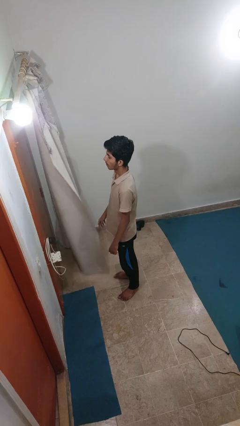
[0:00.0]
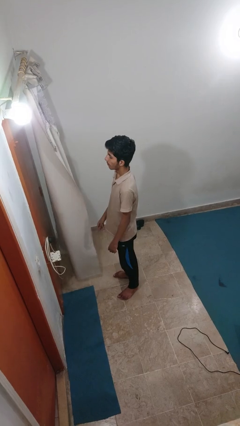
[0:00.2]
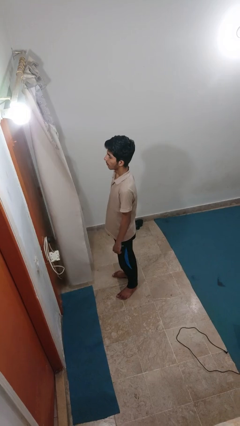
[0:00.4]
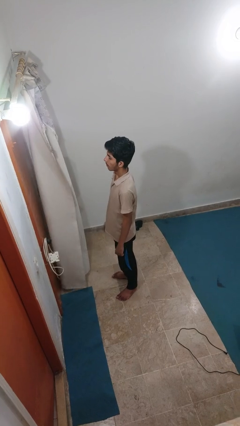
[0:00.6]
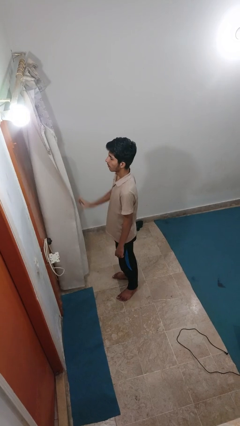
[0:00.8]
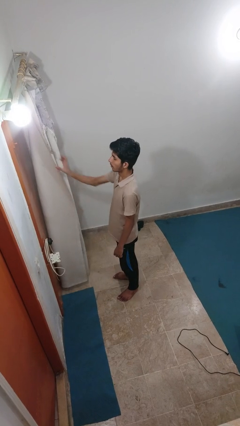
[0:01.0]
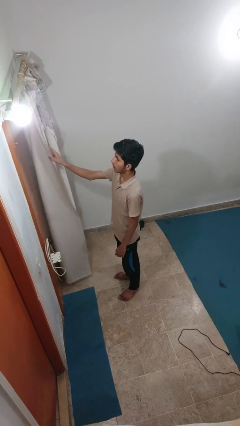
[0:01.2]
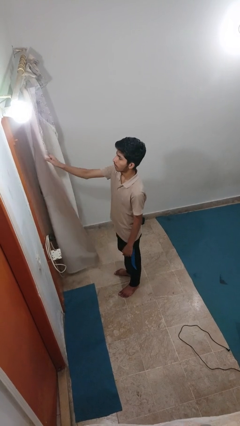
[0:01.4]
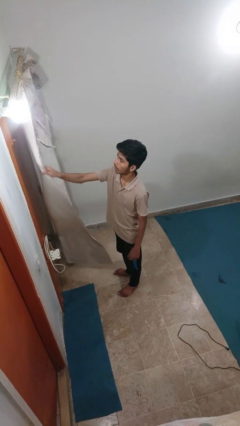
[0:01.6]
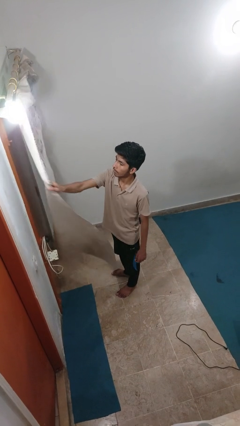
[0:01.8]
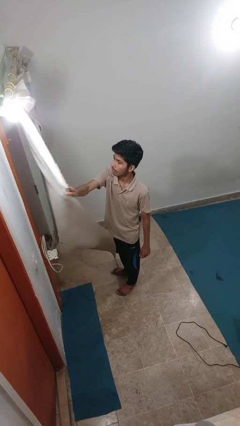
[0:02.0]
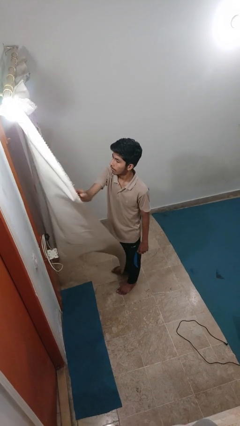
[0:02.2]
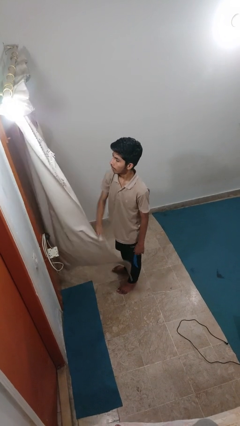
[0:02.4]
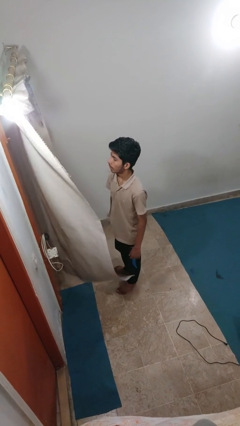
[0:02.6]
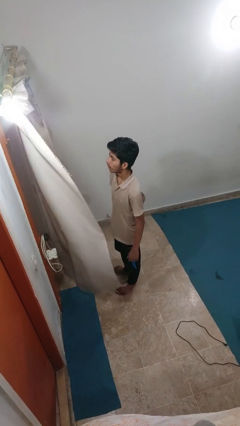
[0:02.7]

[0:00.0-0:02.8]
person closes curtains

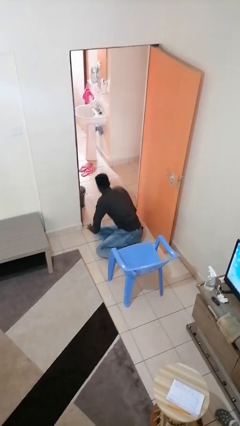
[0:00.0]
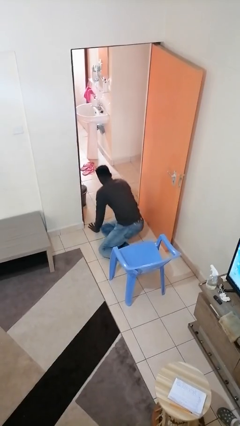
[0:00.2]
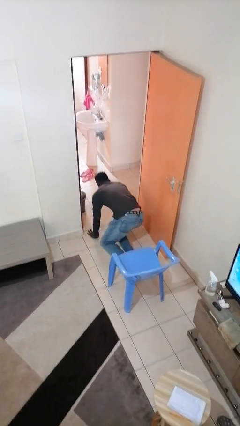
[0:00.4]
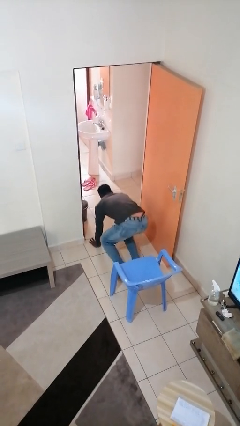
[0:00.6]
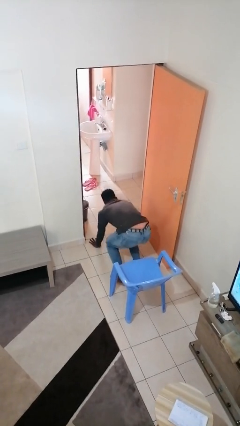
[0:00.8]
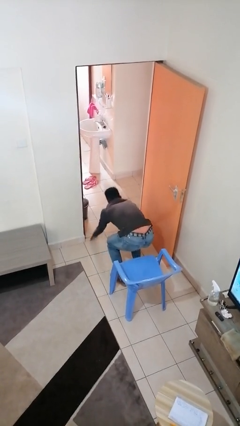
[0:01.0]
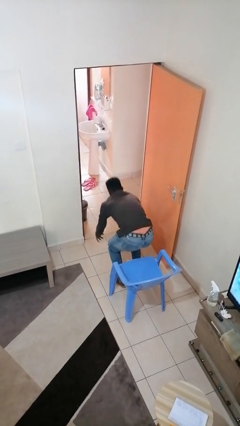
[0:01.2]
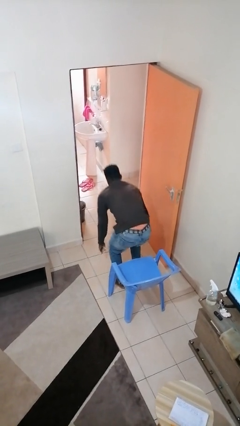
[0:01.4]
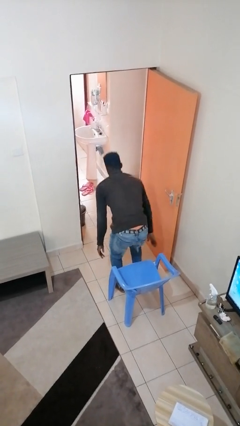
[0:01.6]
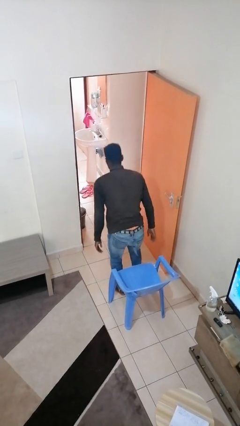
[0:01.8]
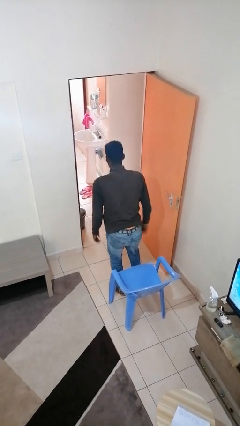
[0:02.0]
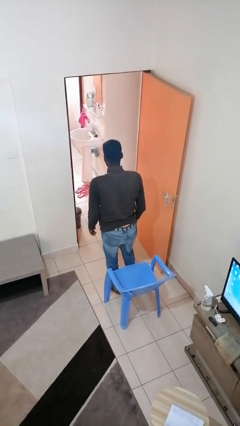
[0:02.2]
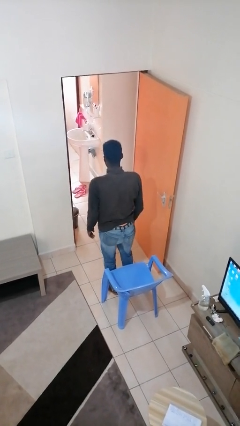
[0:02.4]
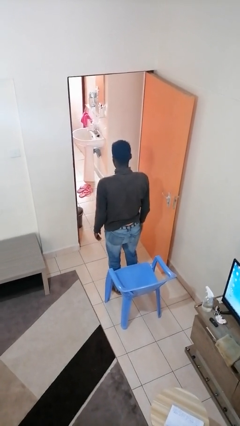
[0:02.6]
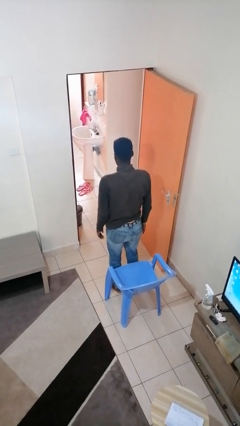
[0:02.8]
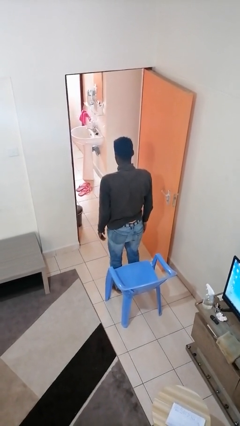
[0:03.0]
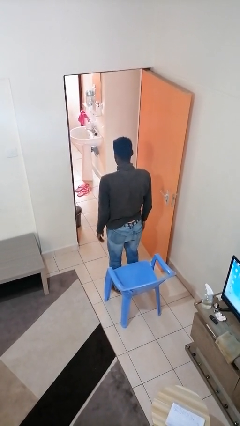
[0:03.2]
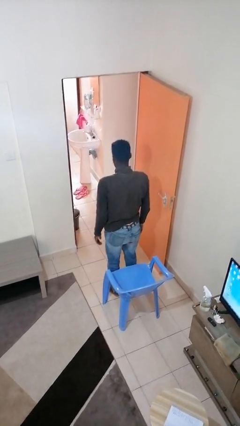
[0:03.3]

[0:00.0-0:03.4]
person stands up from floor

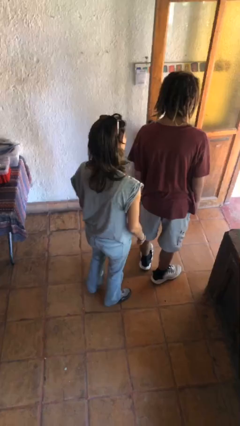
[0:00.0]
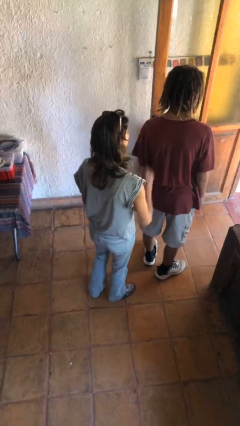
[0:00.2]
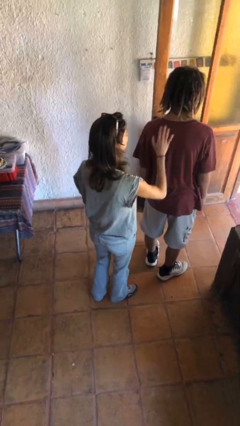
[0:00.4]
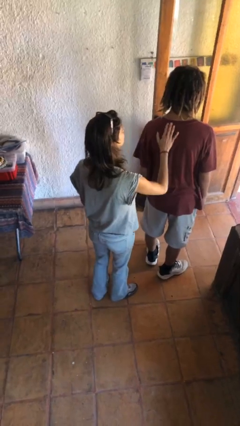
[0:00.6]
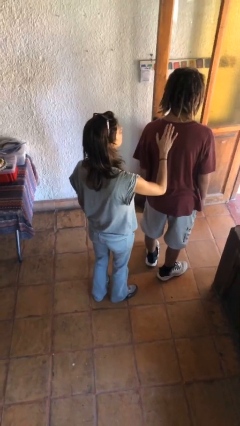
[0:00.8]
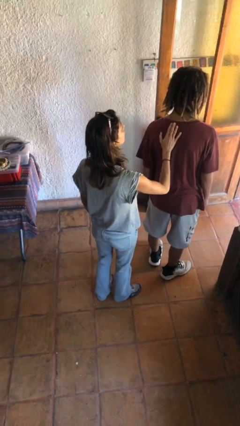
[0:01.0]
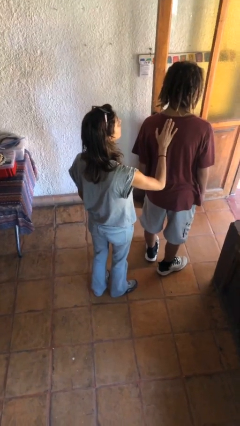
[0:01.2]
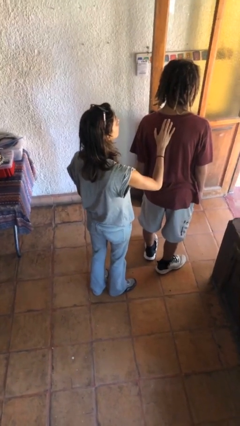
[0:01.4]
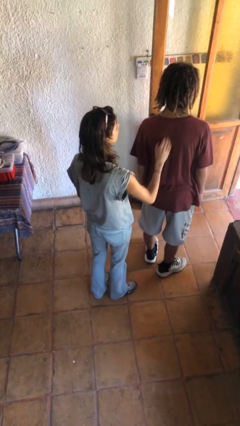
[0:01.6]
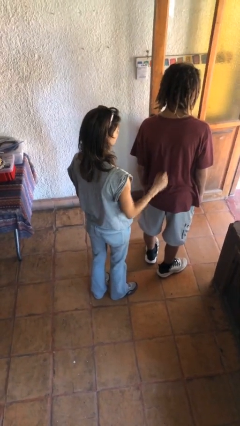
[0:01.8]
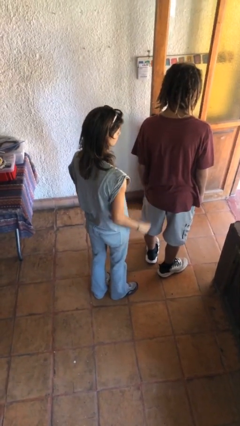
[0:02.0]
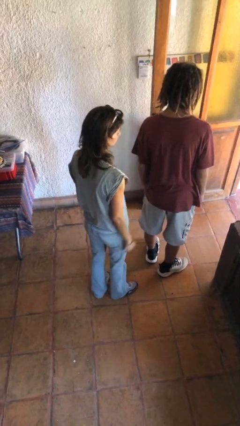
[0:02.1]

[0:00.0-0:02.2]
person touches back of person

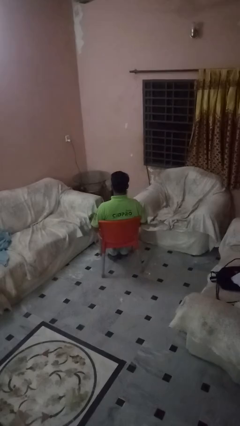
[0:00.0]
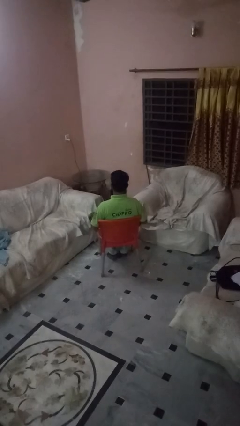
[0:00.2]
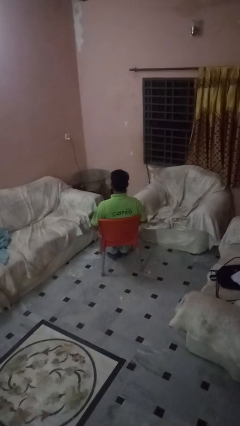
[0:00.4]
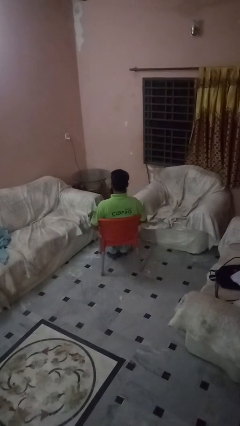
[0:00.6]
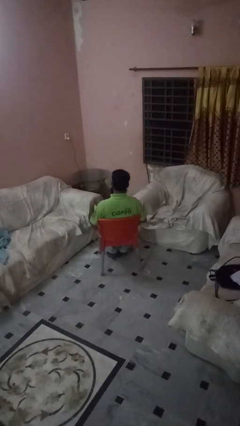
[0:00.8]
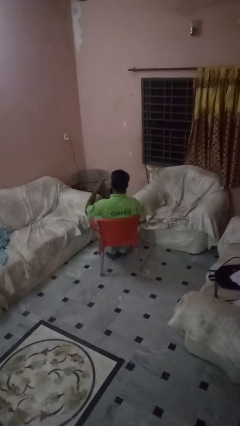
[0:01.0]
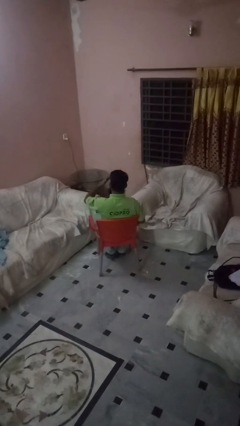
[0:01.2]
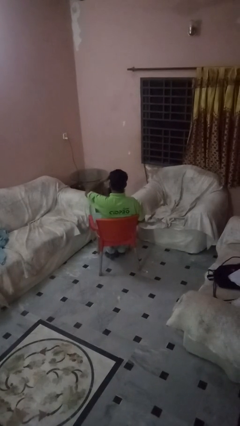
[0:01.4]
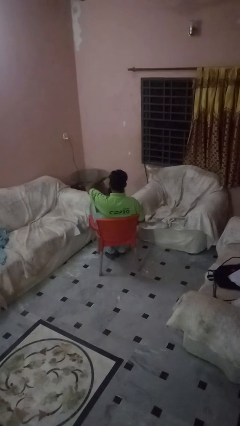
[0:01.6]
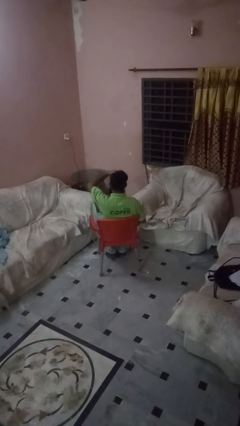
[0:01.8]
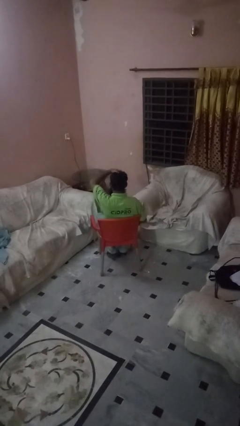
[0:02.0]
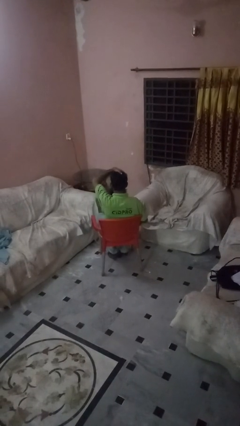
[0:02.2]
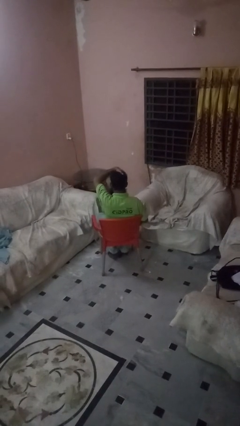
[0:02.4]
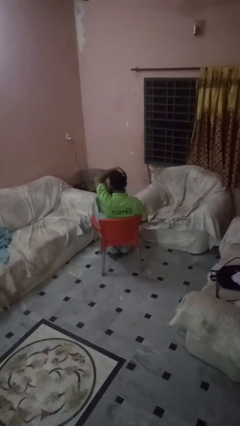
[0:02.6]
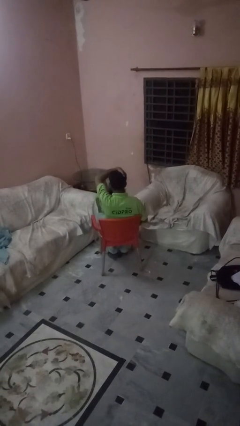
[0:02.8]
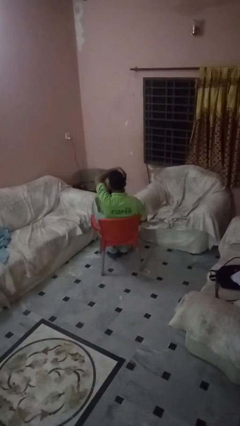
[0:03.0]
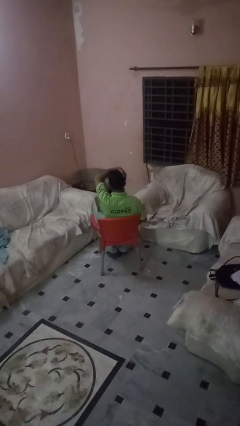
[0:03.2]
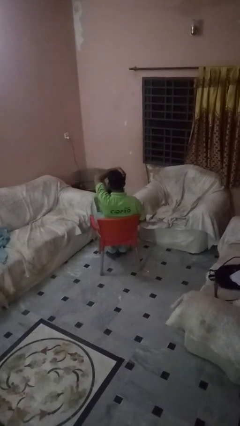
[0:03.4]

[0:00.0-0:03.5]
person strokes hair

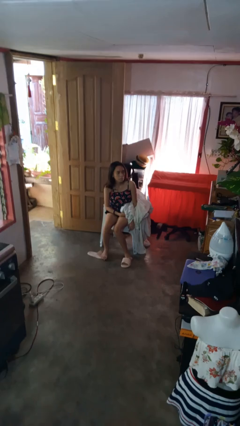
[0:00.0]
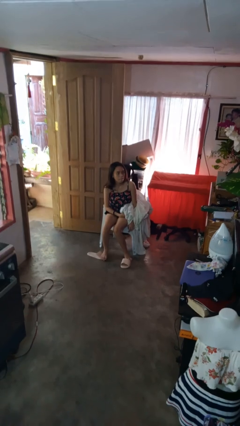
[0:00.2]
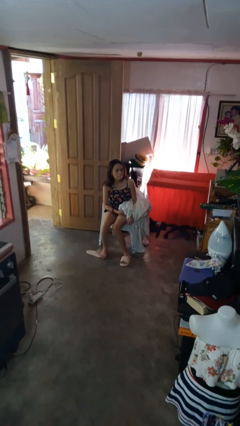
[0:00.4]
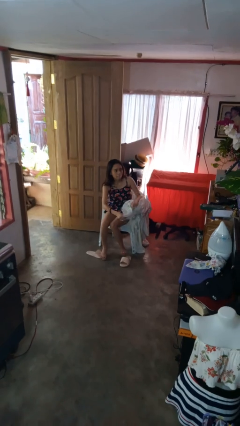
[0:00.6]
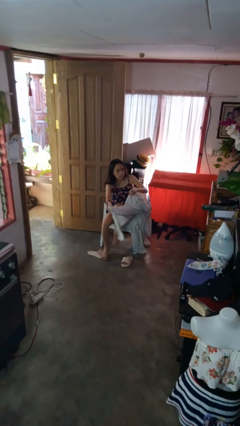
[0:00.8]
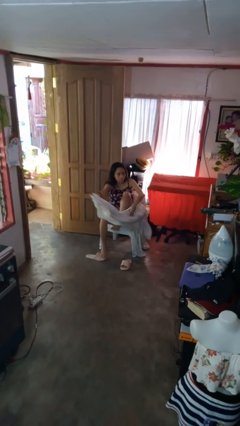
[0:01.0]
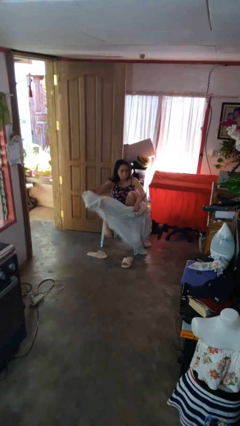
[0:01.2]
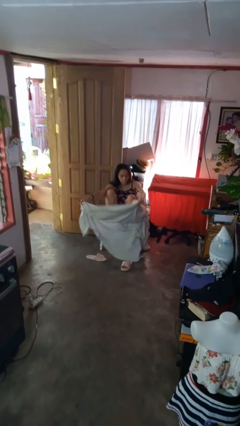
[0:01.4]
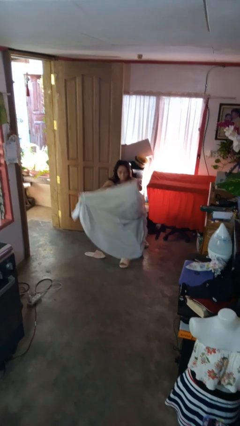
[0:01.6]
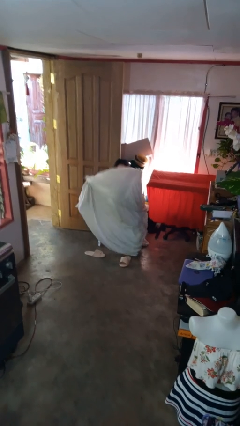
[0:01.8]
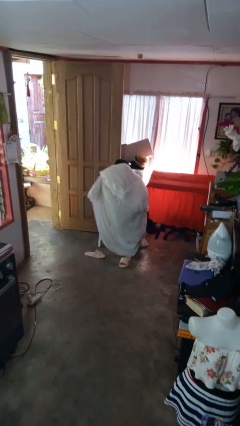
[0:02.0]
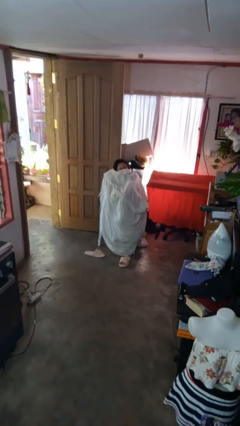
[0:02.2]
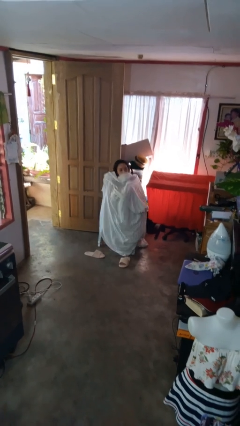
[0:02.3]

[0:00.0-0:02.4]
person covers with blanket

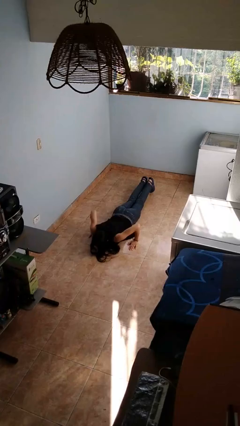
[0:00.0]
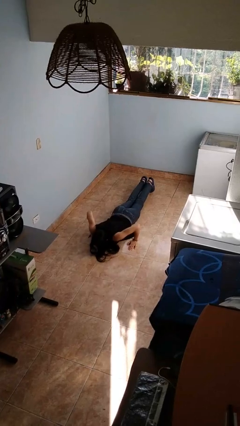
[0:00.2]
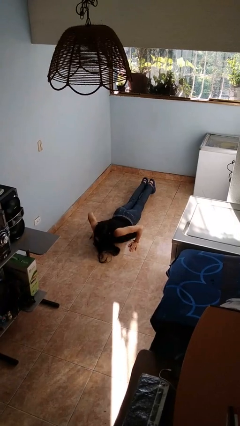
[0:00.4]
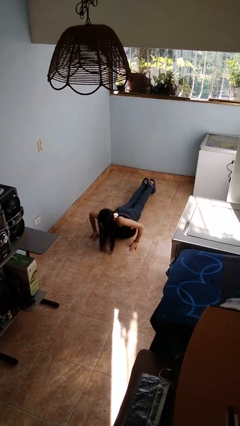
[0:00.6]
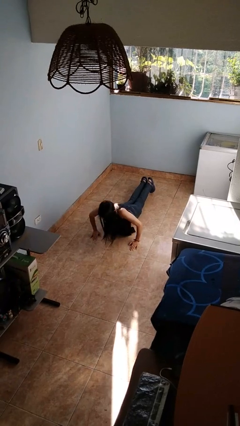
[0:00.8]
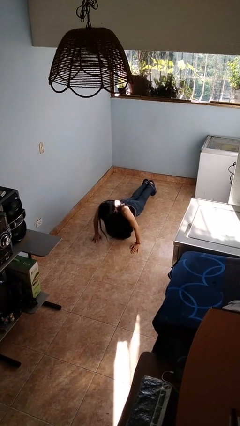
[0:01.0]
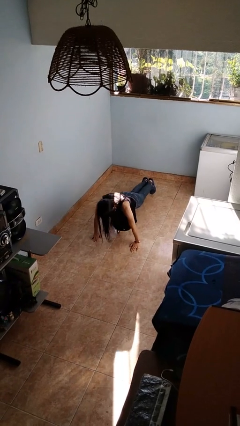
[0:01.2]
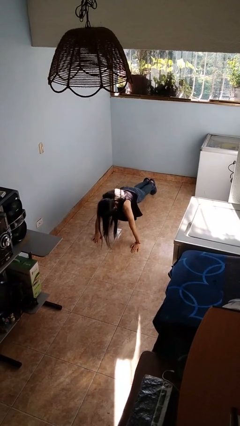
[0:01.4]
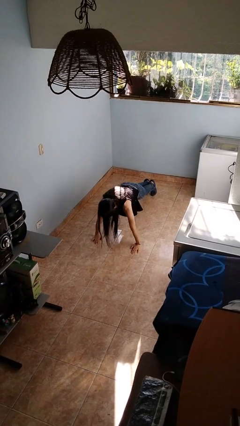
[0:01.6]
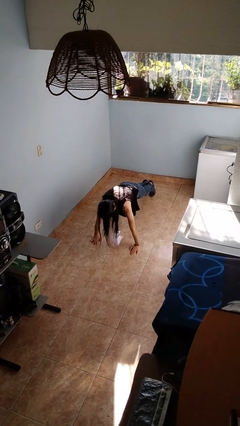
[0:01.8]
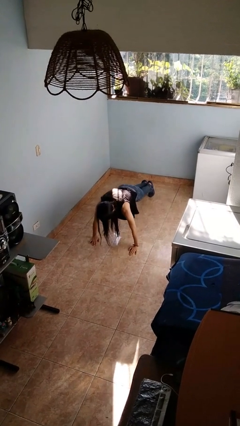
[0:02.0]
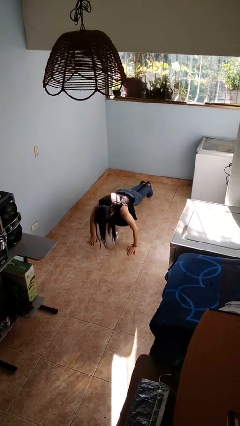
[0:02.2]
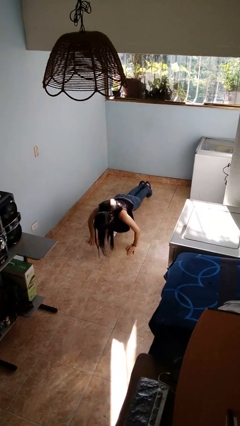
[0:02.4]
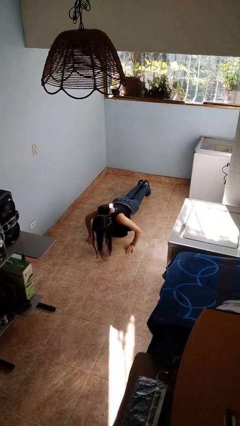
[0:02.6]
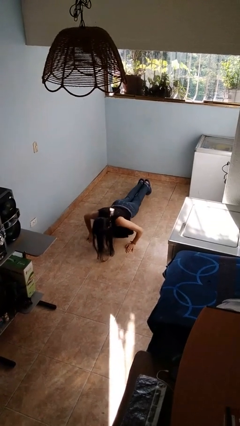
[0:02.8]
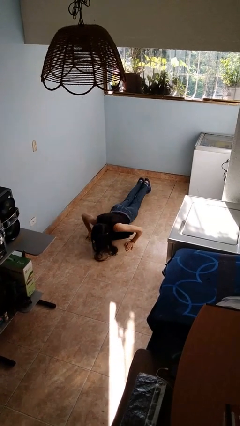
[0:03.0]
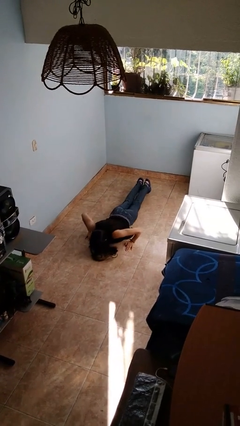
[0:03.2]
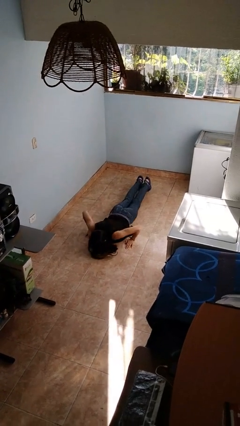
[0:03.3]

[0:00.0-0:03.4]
person exercises with pushup
